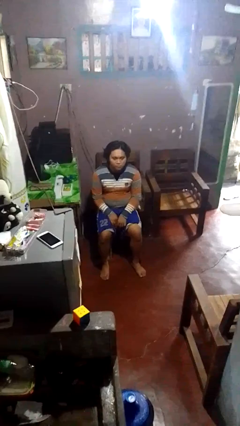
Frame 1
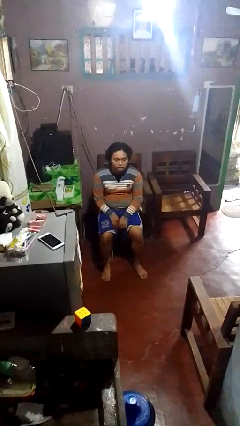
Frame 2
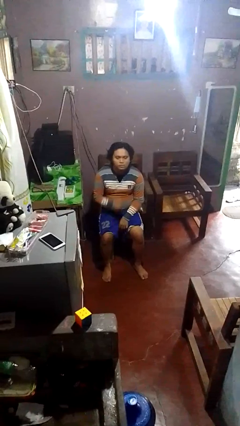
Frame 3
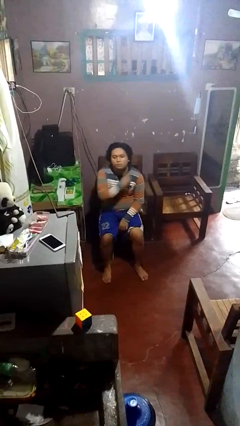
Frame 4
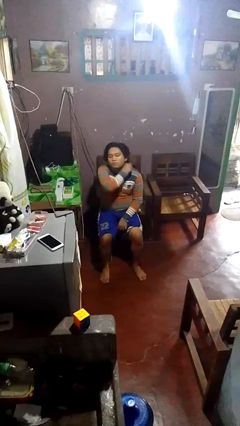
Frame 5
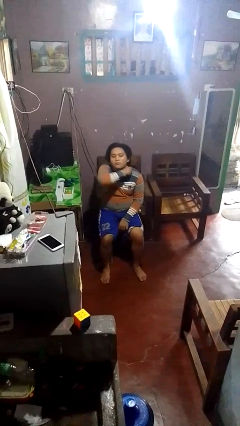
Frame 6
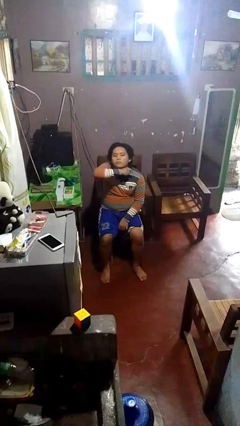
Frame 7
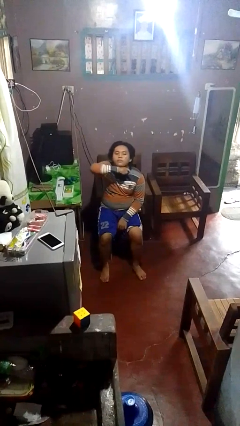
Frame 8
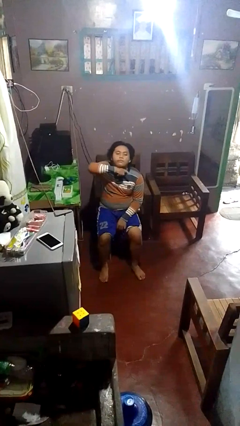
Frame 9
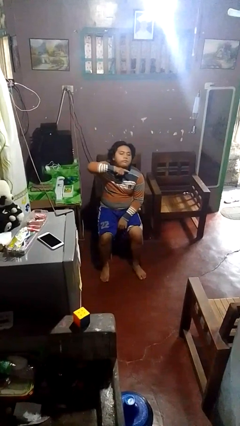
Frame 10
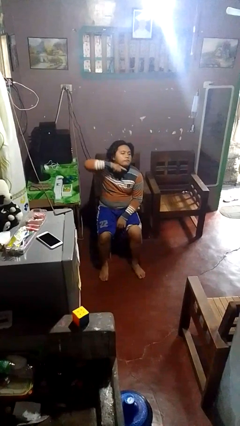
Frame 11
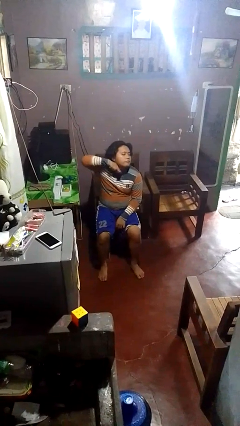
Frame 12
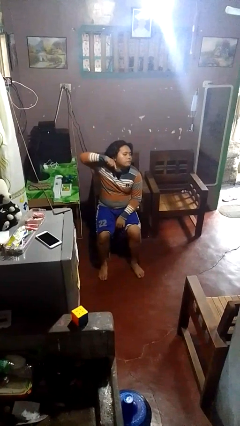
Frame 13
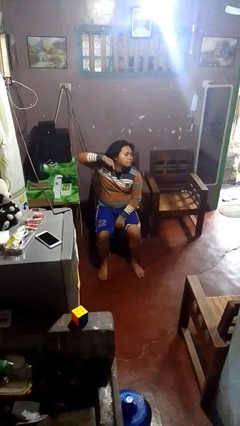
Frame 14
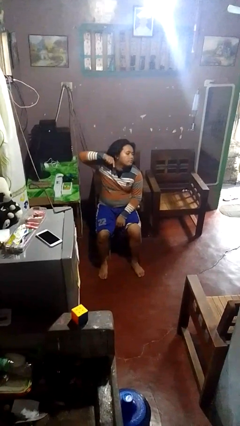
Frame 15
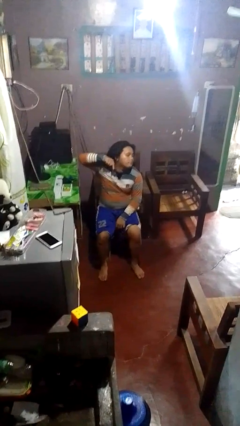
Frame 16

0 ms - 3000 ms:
person gestures cut

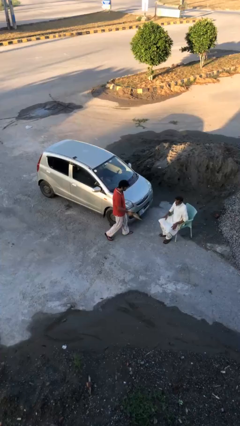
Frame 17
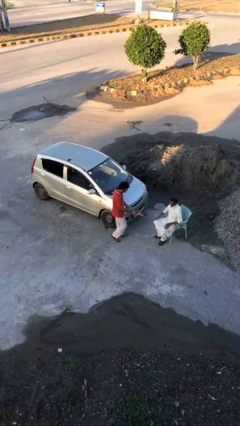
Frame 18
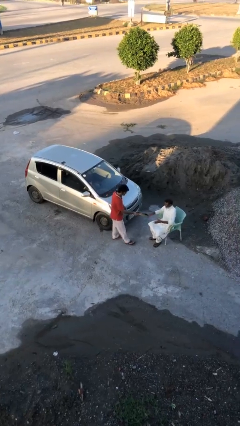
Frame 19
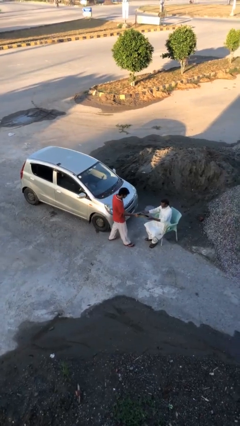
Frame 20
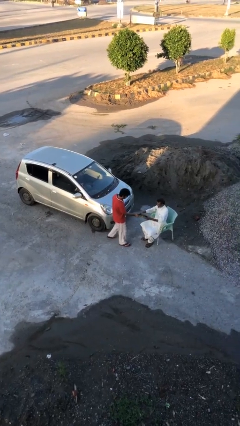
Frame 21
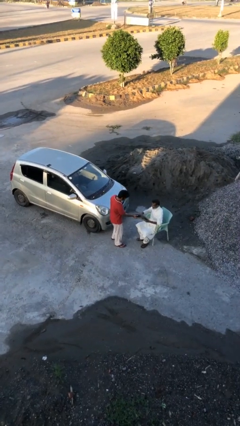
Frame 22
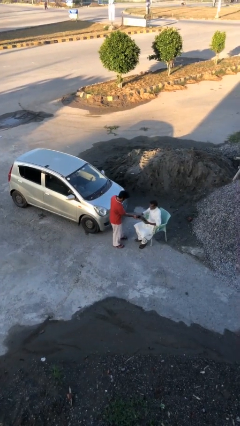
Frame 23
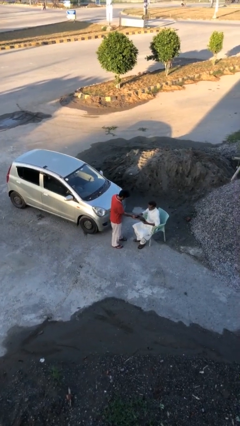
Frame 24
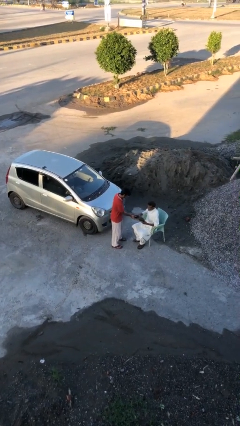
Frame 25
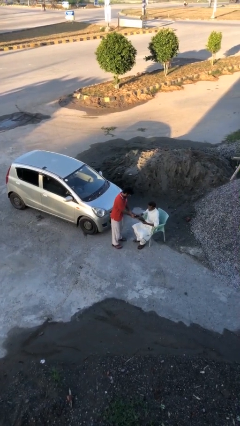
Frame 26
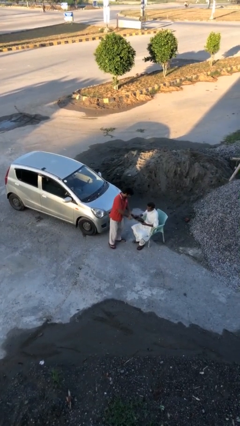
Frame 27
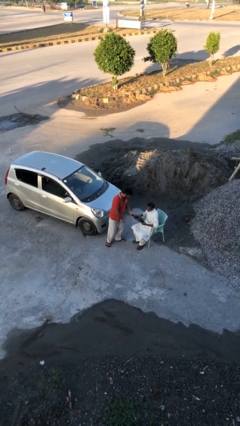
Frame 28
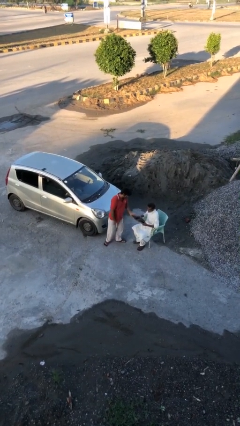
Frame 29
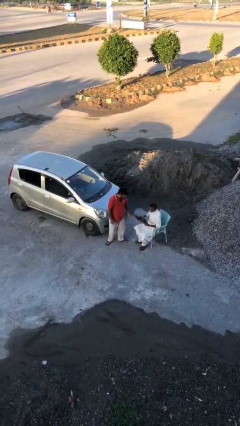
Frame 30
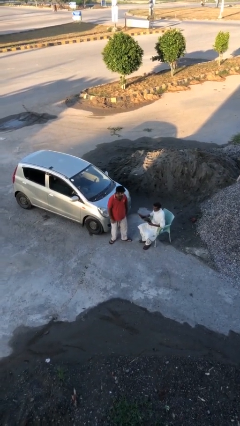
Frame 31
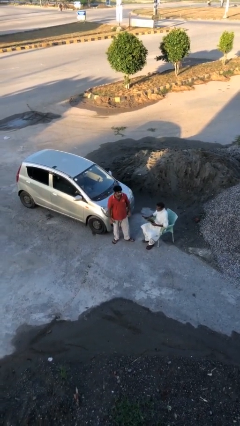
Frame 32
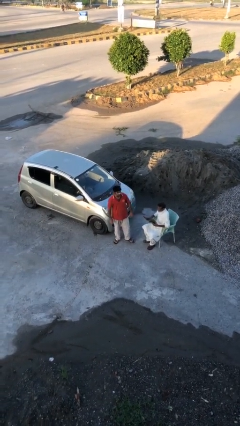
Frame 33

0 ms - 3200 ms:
person transfers object to person

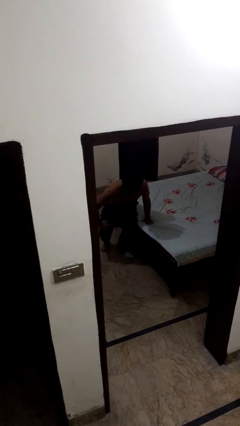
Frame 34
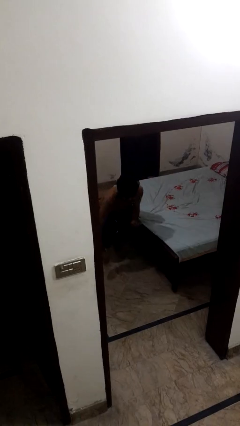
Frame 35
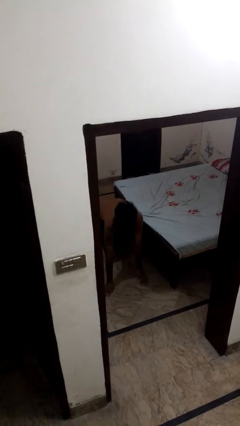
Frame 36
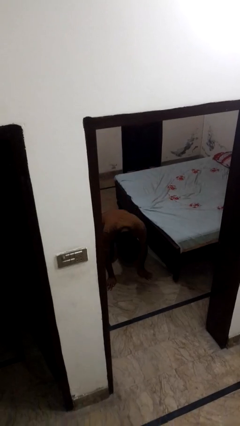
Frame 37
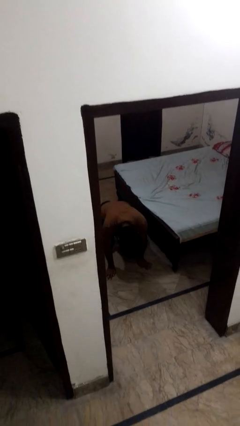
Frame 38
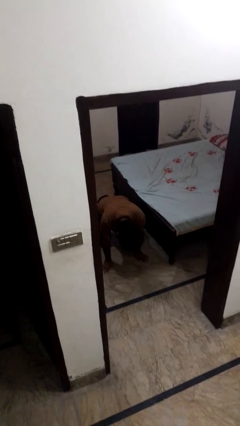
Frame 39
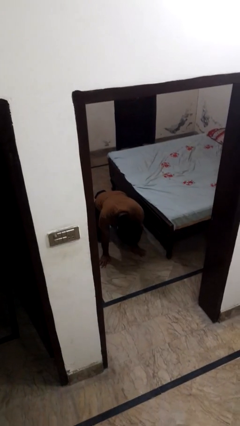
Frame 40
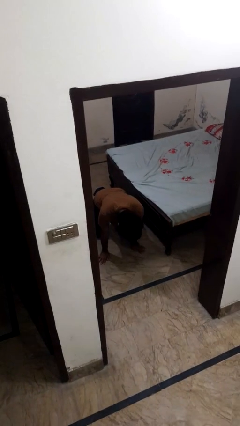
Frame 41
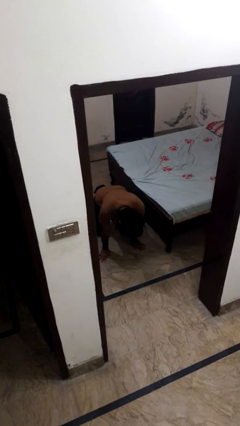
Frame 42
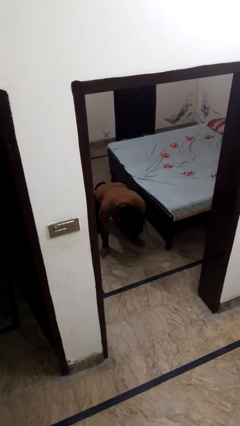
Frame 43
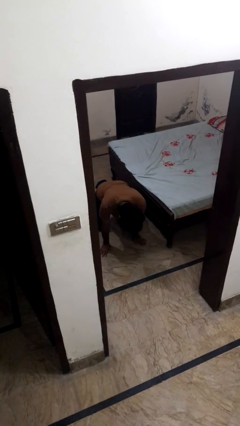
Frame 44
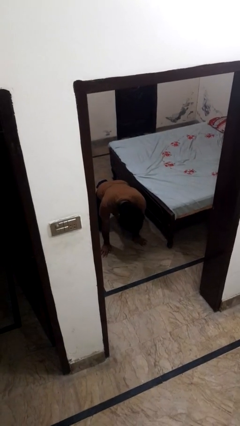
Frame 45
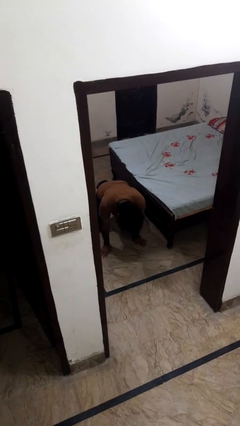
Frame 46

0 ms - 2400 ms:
person falls from bed

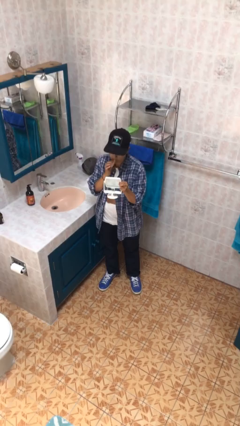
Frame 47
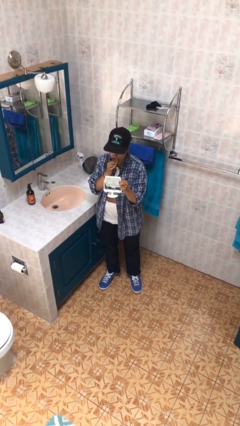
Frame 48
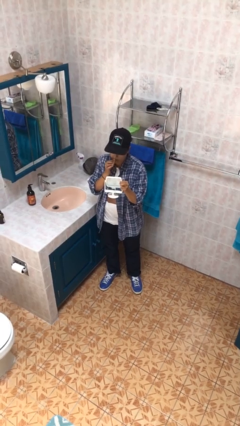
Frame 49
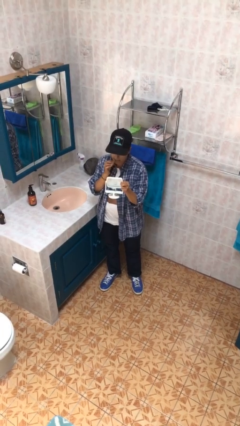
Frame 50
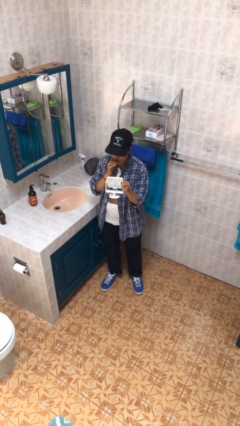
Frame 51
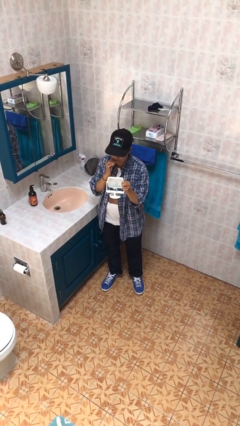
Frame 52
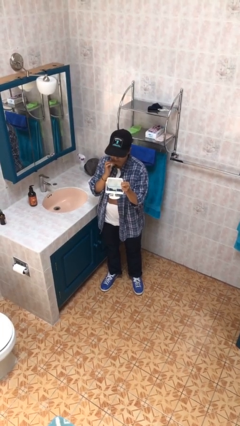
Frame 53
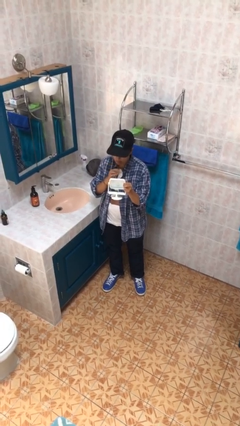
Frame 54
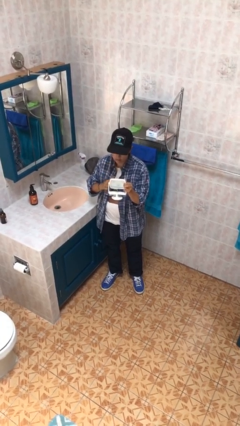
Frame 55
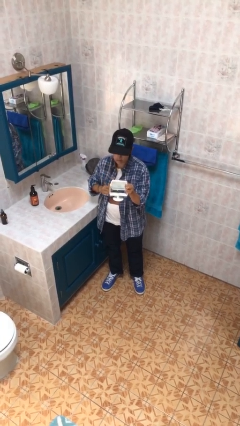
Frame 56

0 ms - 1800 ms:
person applies lip makeup

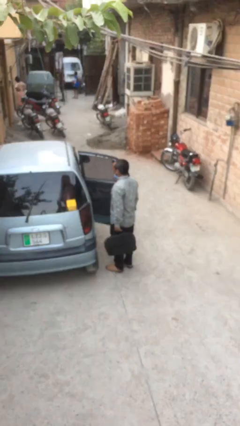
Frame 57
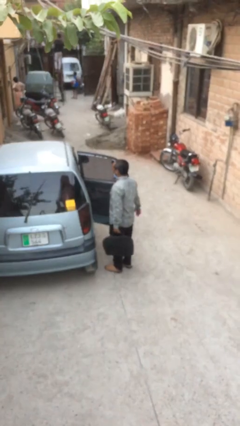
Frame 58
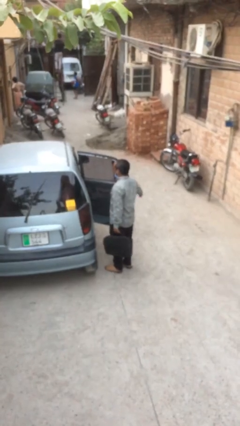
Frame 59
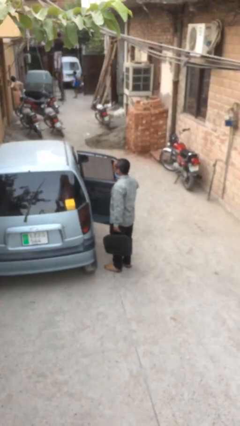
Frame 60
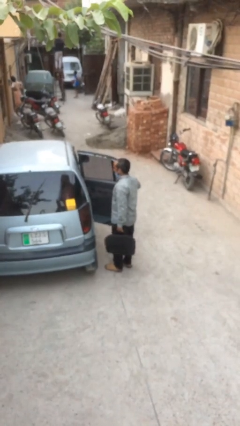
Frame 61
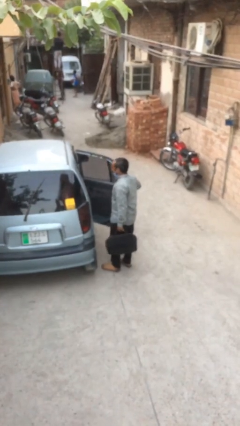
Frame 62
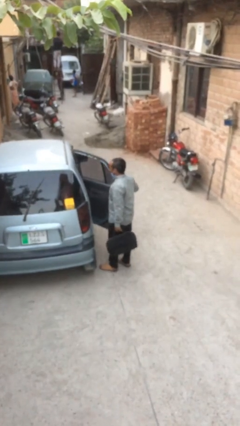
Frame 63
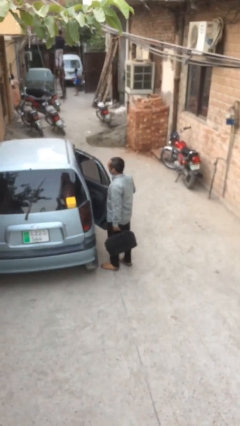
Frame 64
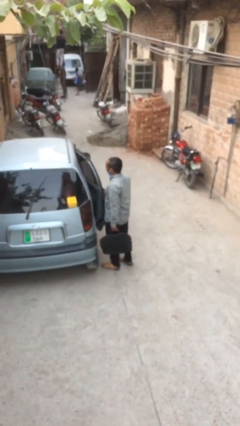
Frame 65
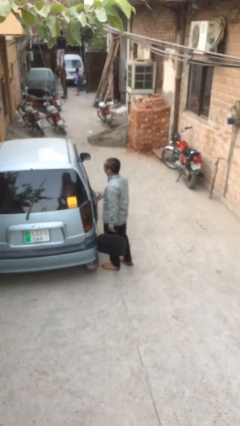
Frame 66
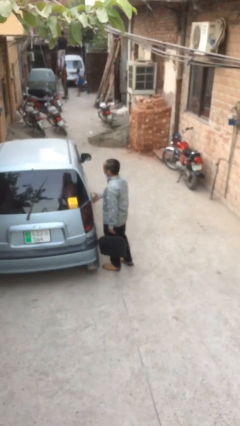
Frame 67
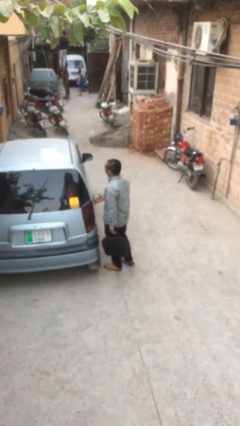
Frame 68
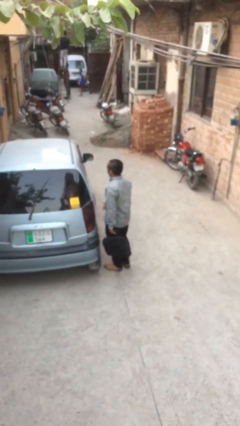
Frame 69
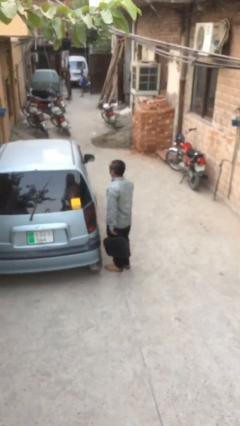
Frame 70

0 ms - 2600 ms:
person closes car door

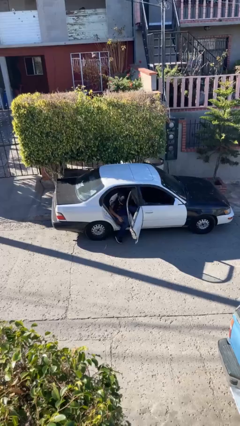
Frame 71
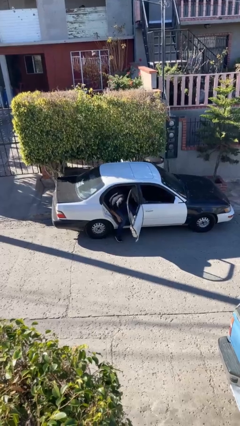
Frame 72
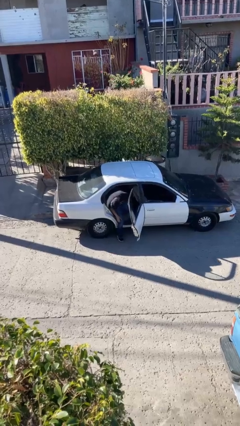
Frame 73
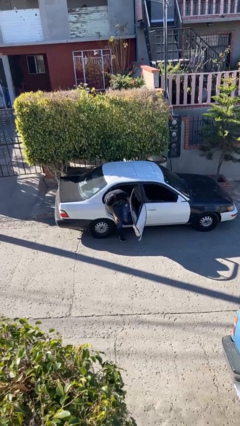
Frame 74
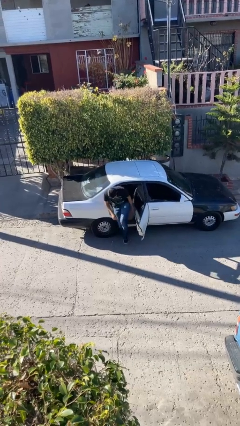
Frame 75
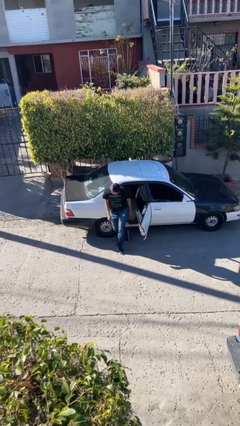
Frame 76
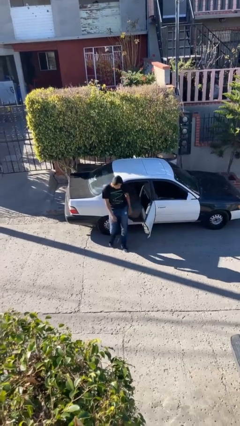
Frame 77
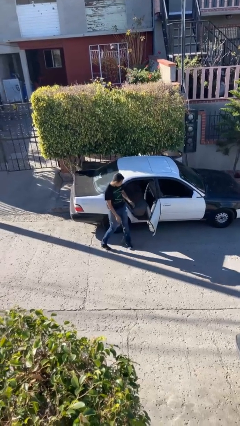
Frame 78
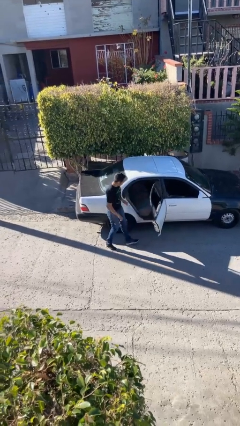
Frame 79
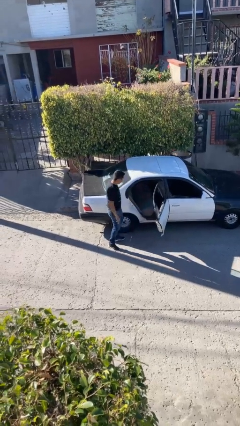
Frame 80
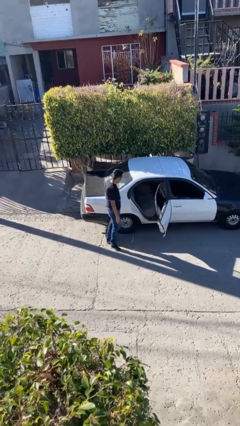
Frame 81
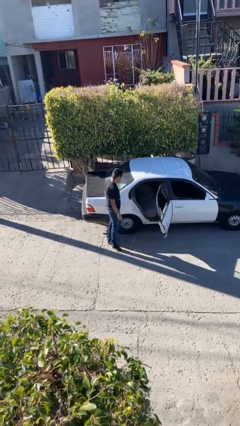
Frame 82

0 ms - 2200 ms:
person exits car

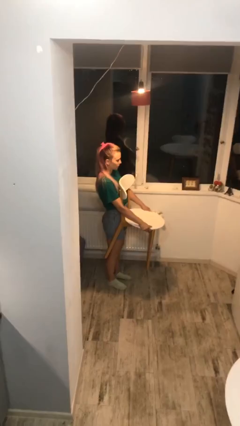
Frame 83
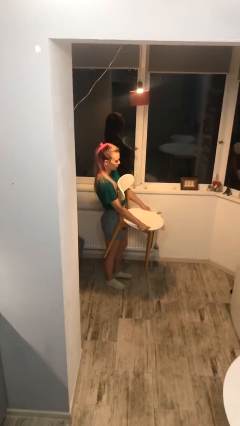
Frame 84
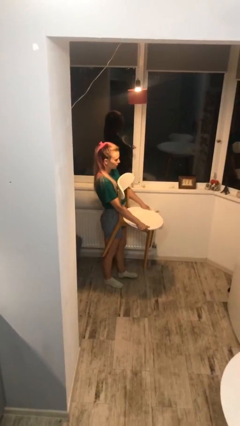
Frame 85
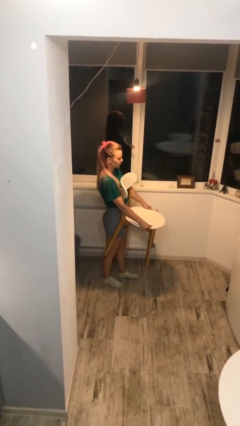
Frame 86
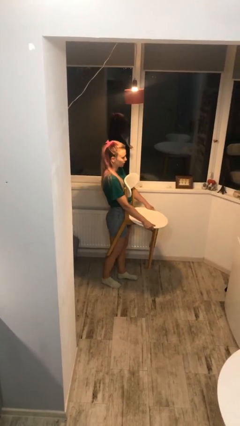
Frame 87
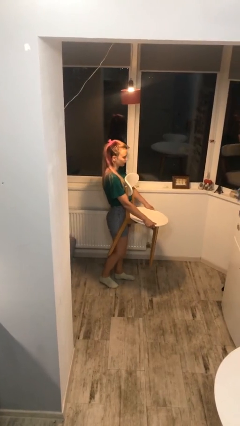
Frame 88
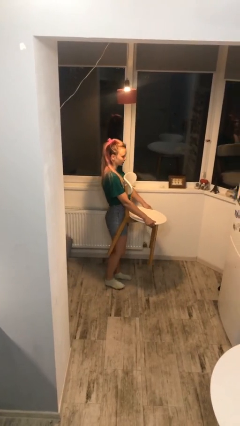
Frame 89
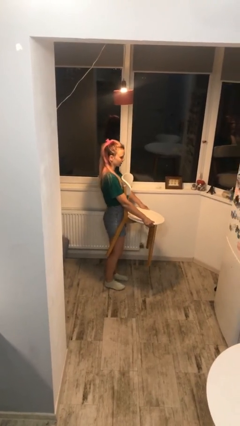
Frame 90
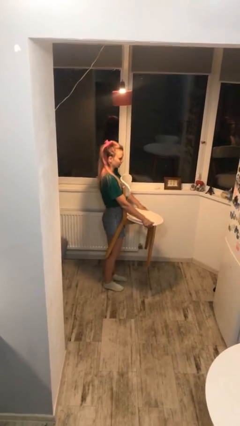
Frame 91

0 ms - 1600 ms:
person carries furniture
